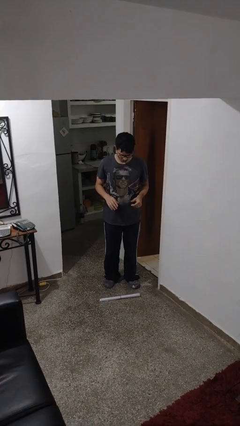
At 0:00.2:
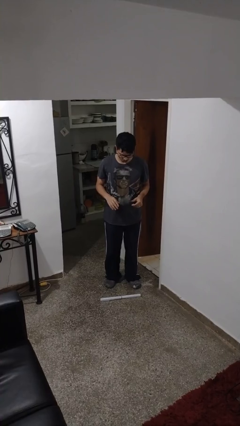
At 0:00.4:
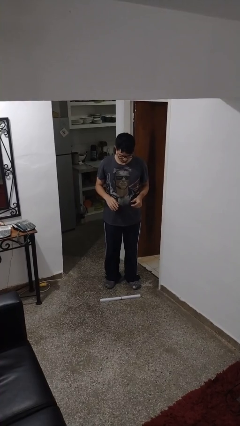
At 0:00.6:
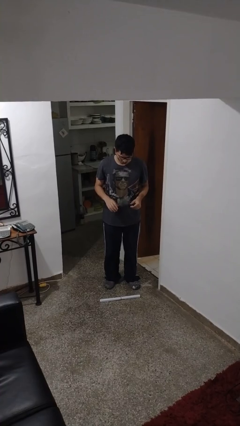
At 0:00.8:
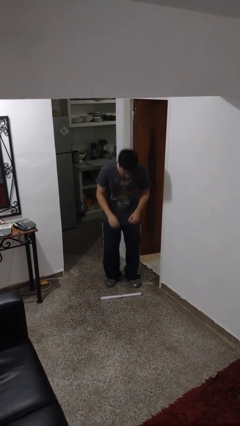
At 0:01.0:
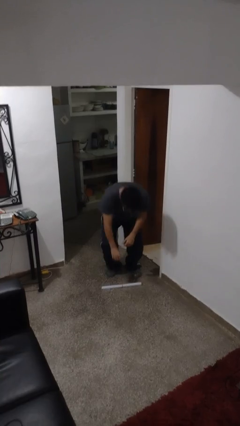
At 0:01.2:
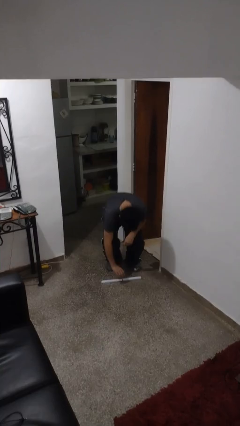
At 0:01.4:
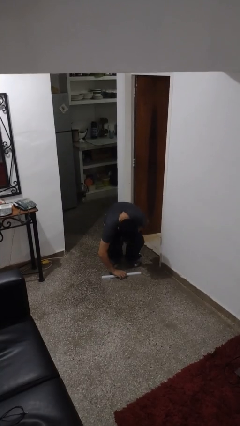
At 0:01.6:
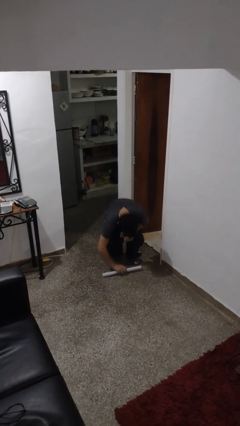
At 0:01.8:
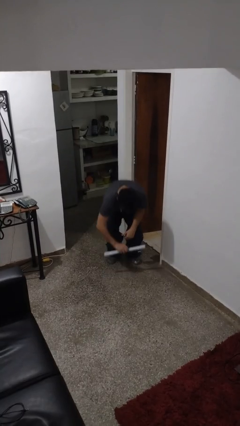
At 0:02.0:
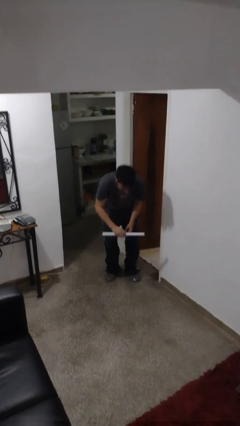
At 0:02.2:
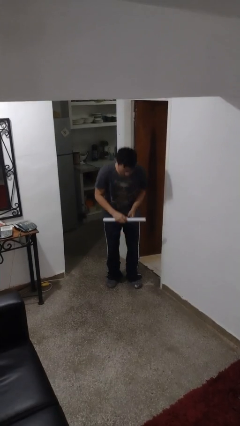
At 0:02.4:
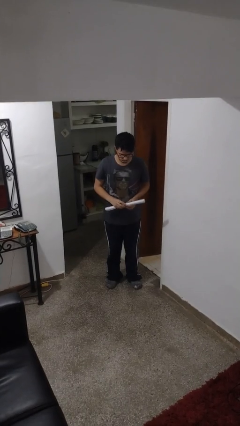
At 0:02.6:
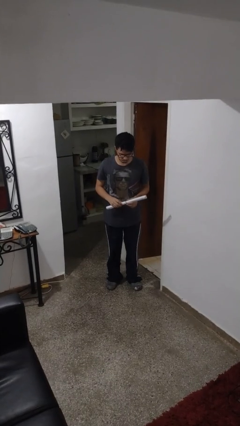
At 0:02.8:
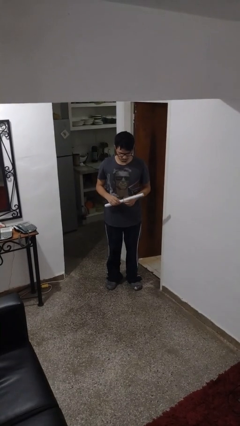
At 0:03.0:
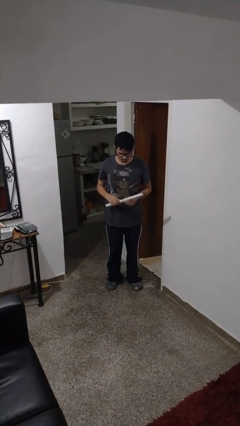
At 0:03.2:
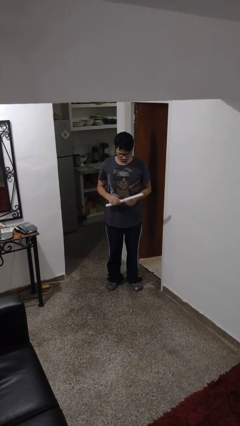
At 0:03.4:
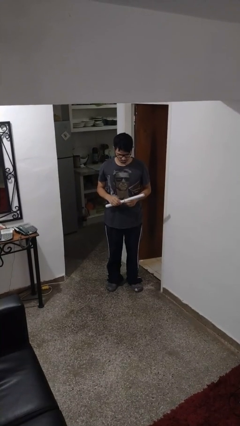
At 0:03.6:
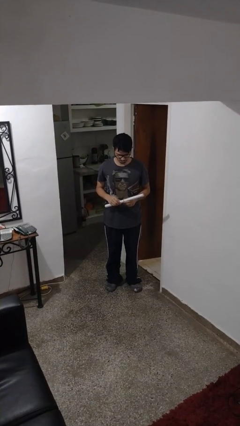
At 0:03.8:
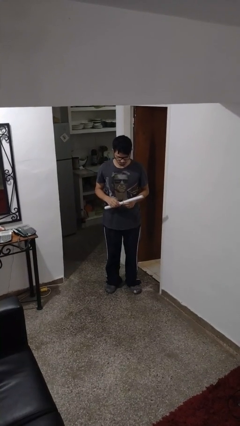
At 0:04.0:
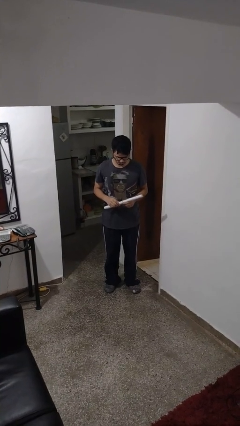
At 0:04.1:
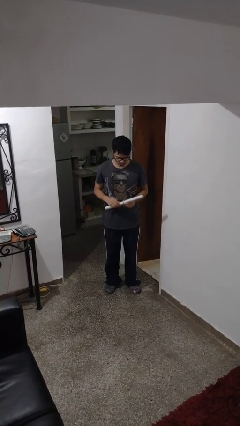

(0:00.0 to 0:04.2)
person picks up object from floor

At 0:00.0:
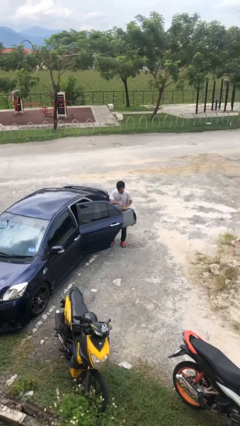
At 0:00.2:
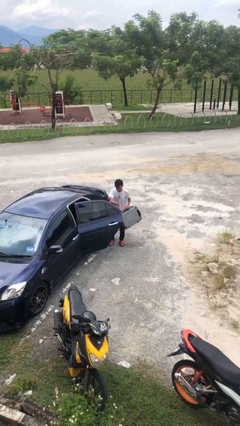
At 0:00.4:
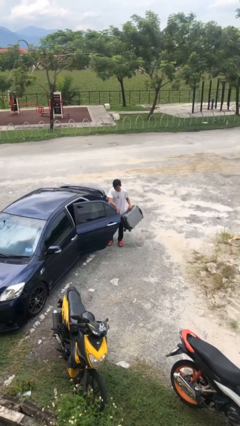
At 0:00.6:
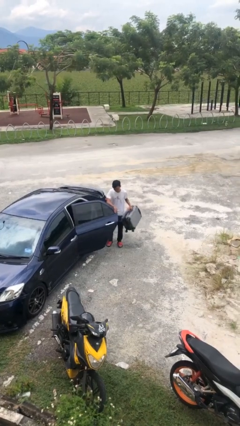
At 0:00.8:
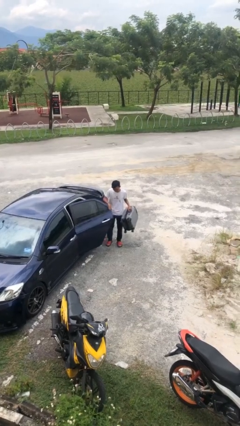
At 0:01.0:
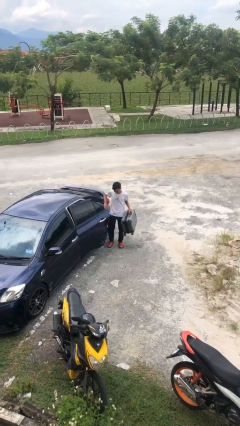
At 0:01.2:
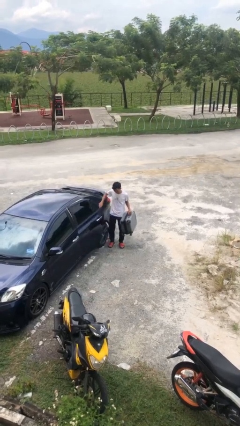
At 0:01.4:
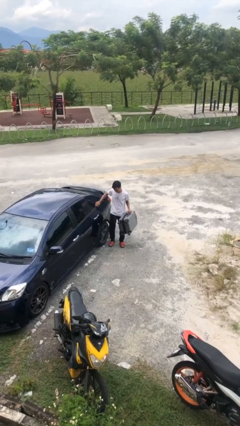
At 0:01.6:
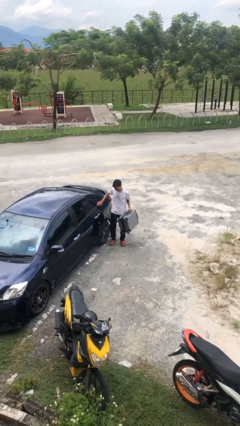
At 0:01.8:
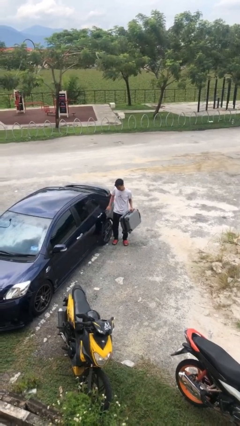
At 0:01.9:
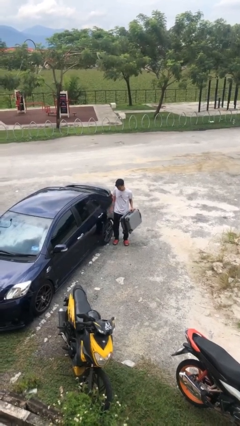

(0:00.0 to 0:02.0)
person closes car door

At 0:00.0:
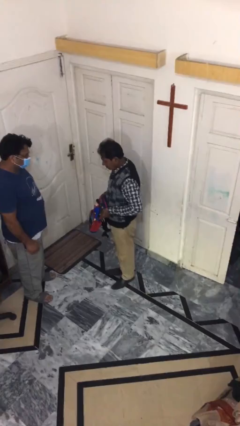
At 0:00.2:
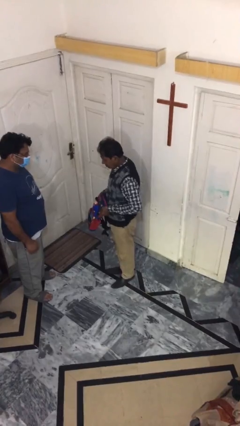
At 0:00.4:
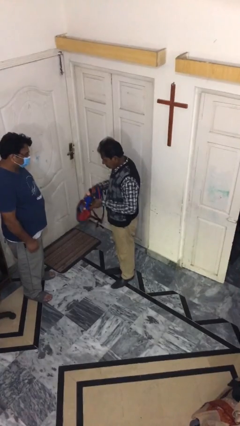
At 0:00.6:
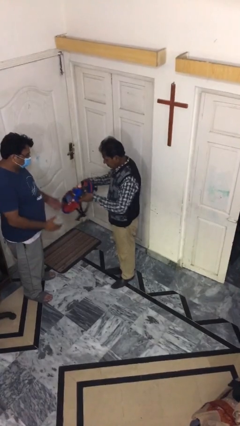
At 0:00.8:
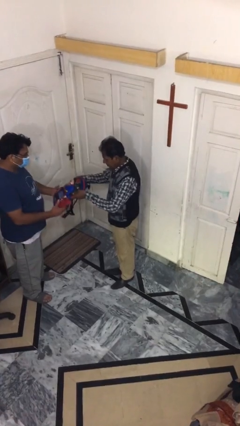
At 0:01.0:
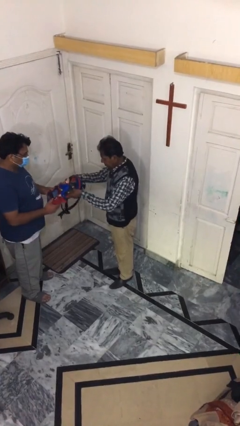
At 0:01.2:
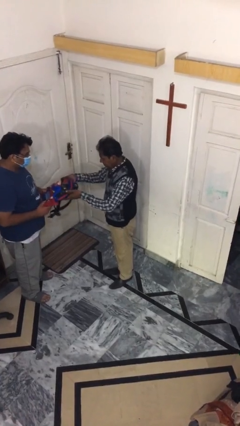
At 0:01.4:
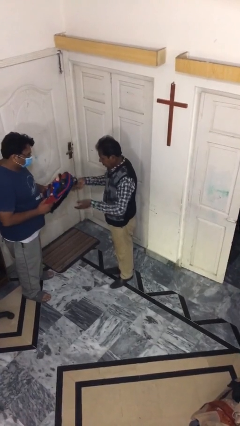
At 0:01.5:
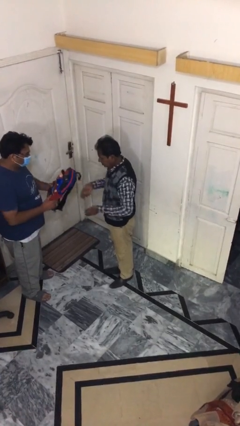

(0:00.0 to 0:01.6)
person transfers object to person

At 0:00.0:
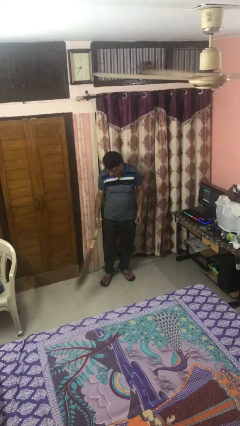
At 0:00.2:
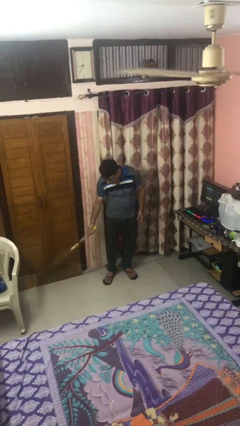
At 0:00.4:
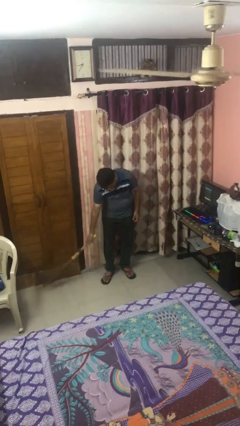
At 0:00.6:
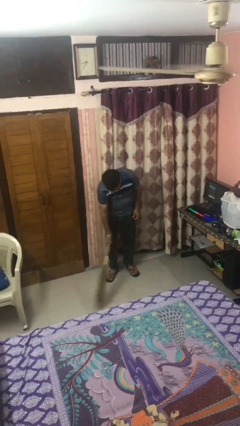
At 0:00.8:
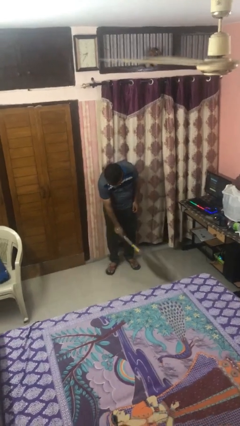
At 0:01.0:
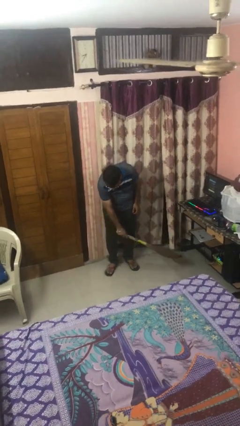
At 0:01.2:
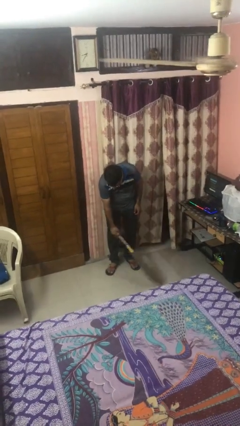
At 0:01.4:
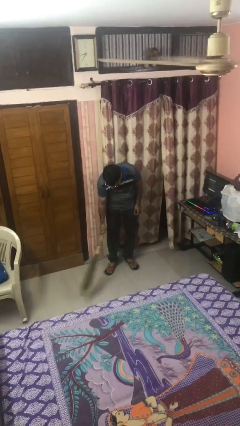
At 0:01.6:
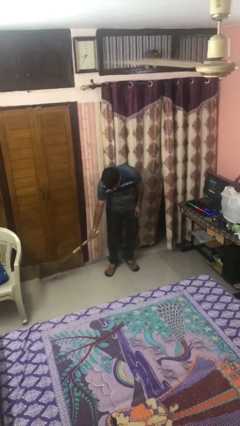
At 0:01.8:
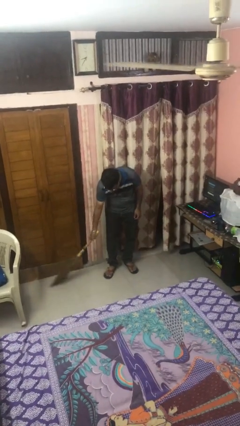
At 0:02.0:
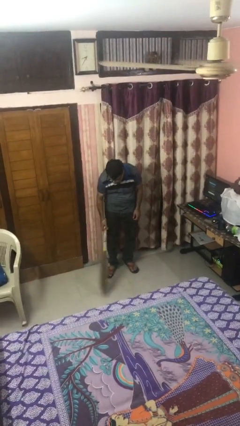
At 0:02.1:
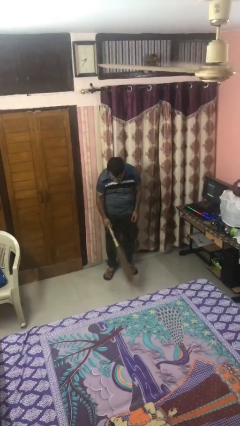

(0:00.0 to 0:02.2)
person sweeps floor

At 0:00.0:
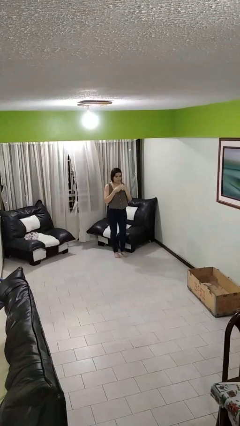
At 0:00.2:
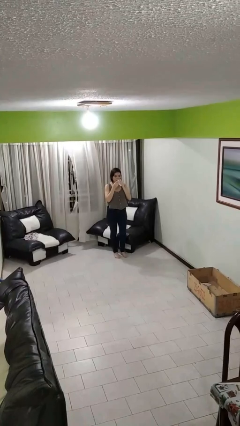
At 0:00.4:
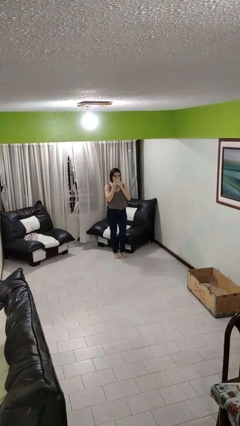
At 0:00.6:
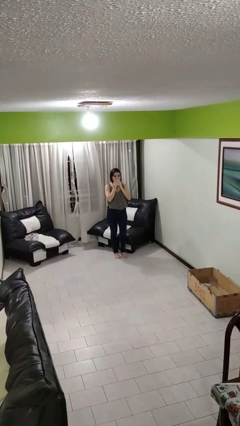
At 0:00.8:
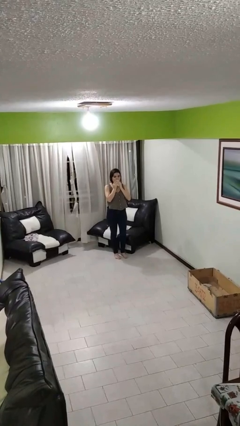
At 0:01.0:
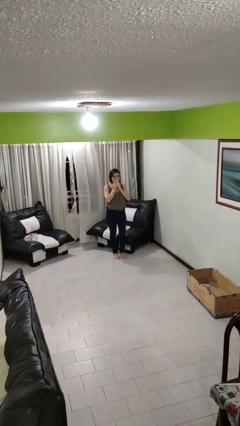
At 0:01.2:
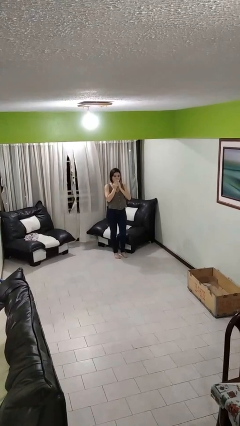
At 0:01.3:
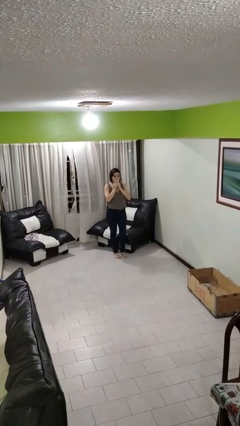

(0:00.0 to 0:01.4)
person wipes mouth with napkin

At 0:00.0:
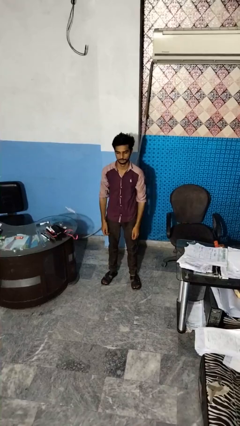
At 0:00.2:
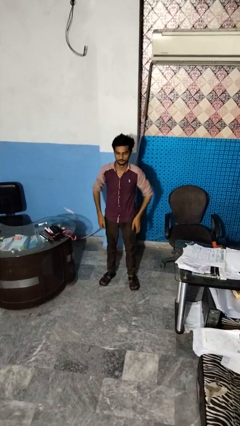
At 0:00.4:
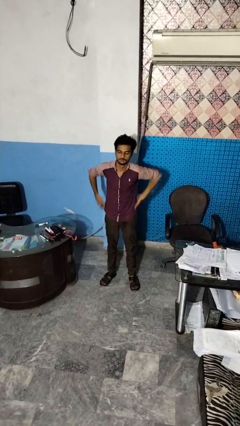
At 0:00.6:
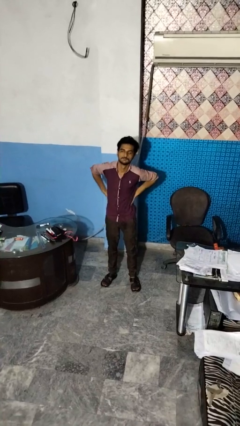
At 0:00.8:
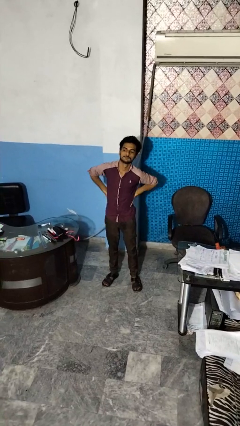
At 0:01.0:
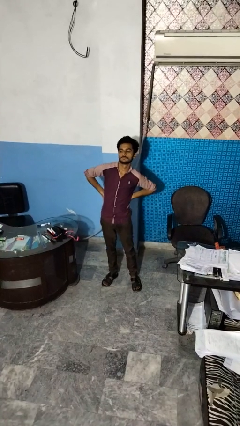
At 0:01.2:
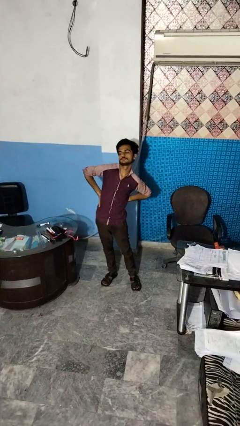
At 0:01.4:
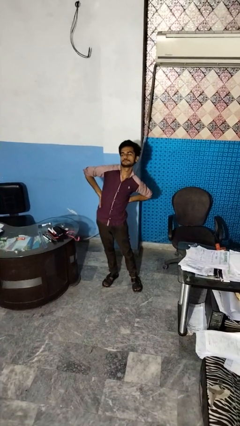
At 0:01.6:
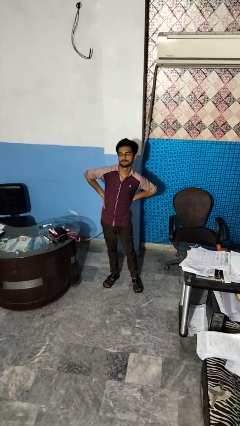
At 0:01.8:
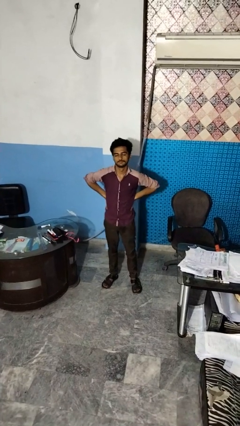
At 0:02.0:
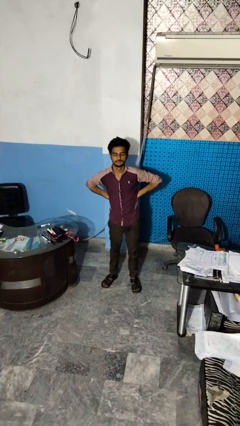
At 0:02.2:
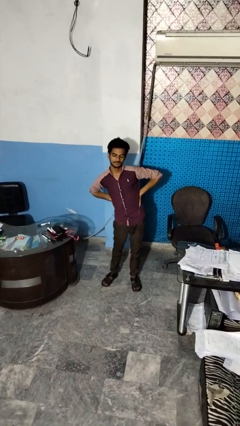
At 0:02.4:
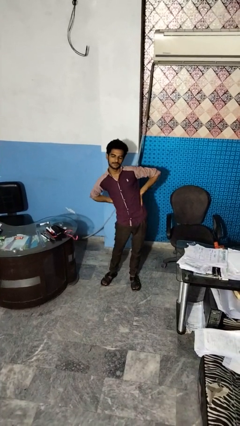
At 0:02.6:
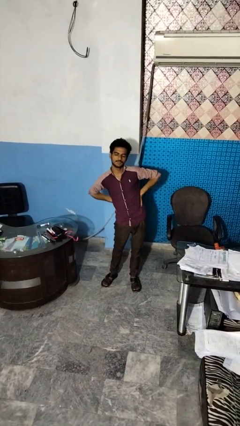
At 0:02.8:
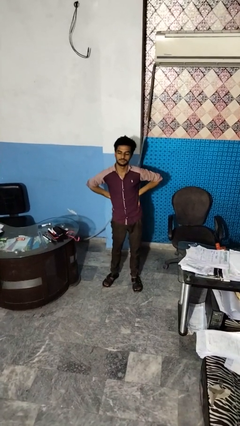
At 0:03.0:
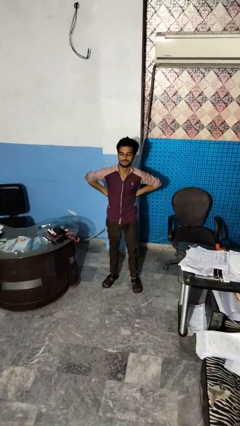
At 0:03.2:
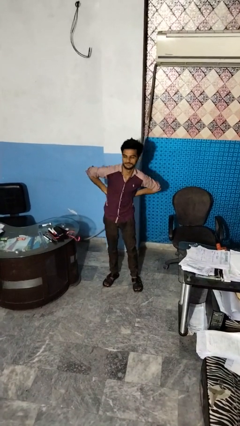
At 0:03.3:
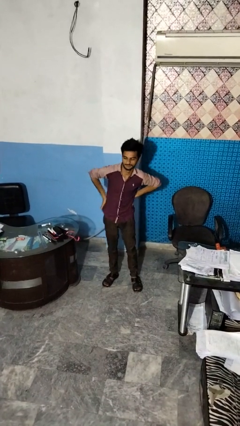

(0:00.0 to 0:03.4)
person stretches back

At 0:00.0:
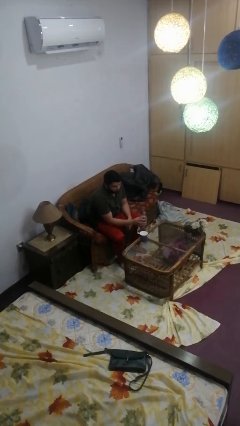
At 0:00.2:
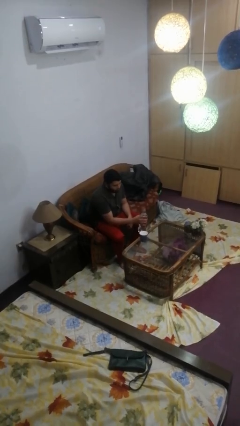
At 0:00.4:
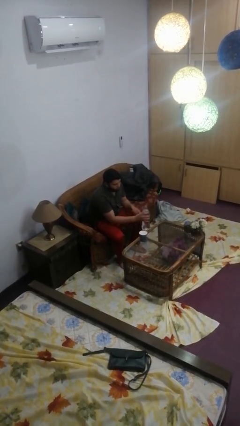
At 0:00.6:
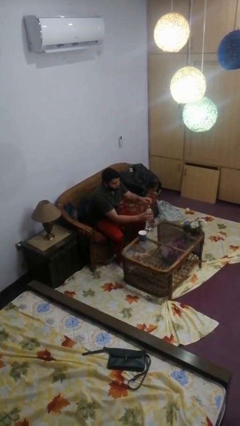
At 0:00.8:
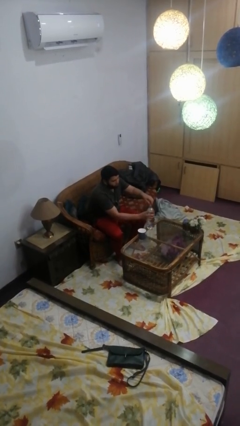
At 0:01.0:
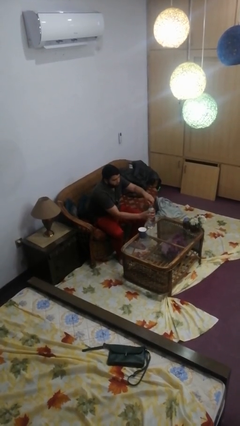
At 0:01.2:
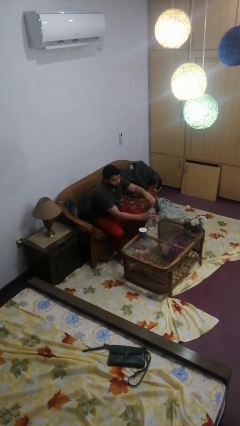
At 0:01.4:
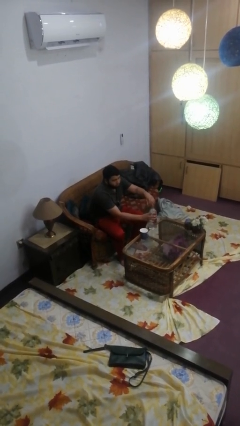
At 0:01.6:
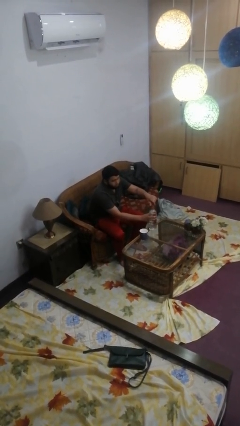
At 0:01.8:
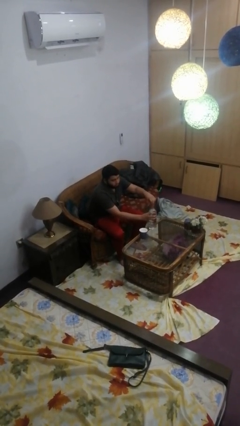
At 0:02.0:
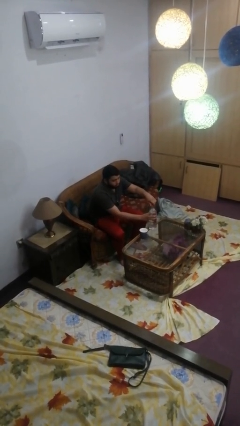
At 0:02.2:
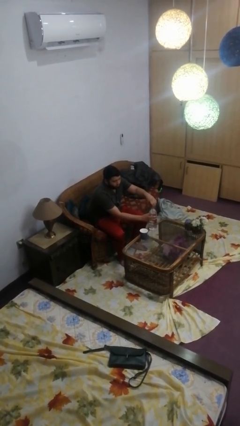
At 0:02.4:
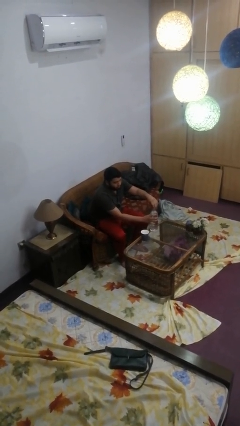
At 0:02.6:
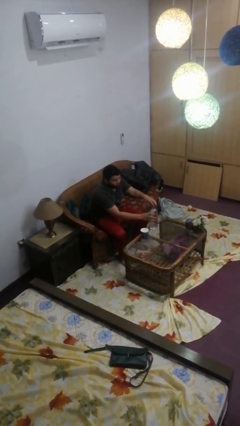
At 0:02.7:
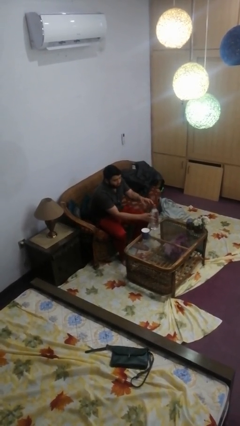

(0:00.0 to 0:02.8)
person screws lid to bottle
